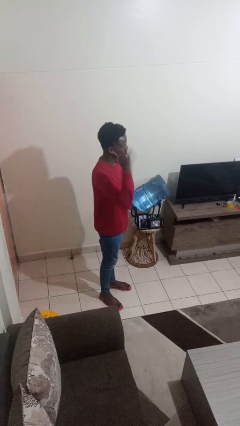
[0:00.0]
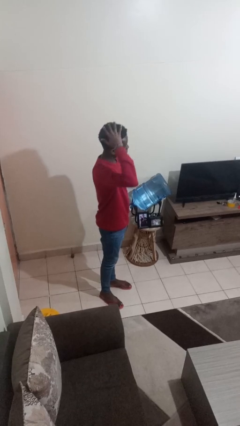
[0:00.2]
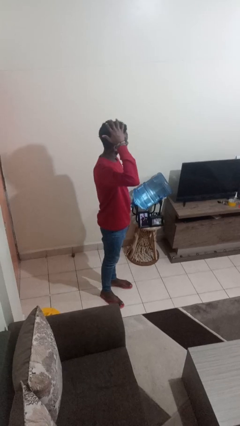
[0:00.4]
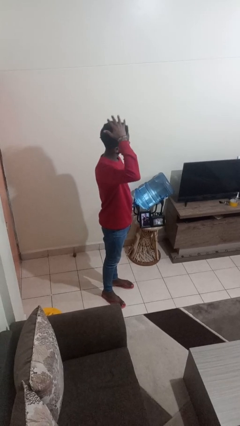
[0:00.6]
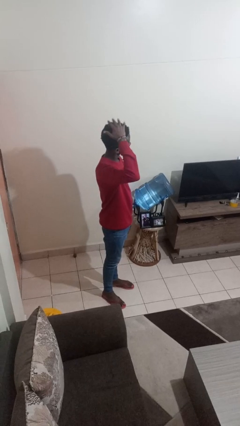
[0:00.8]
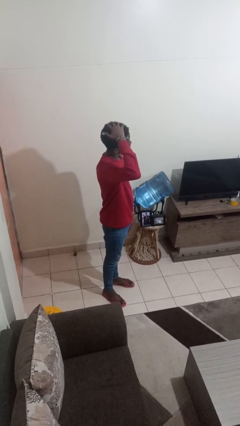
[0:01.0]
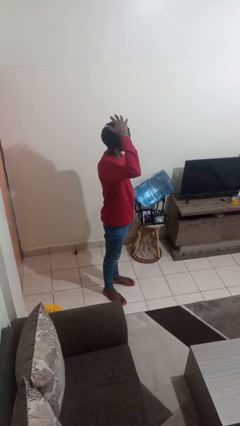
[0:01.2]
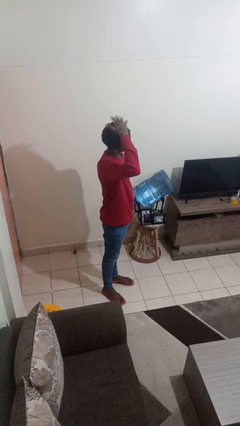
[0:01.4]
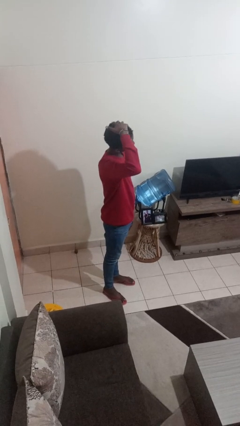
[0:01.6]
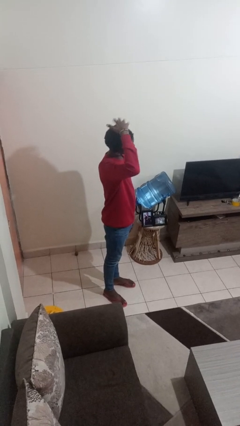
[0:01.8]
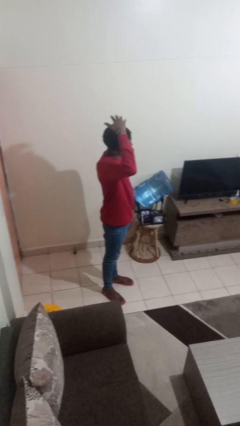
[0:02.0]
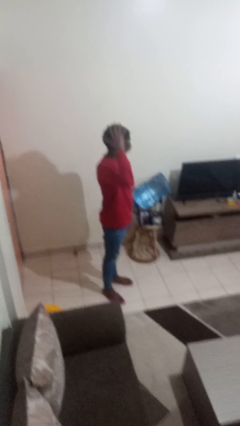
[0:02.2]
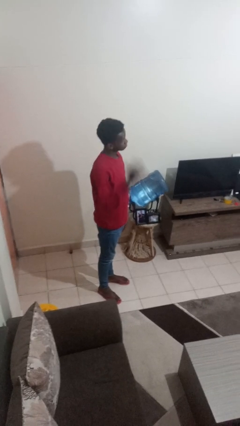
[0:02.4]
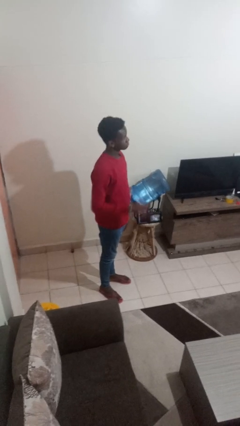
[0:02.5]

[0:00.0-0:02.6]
person pats head

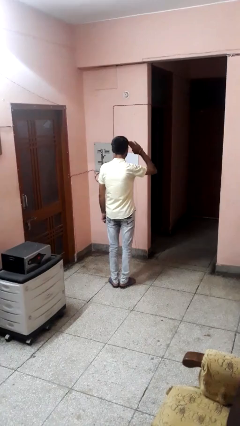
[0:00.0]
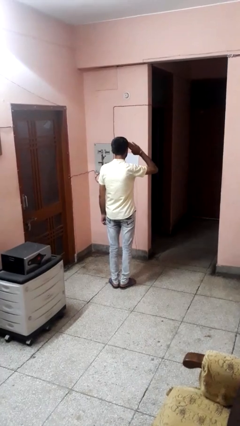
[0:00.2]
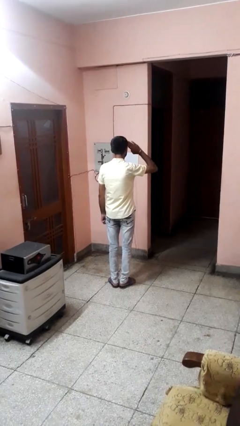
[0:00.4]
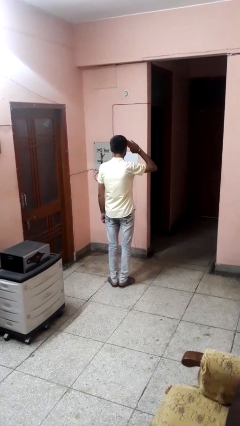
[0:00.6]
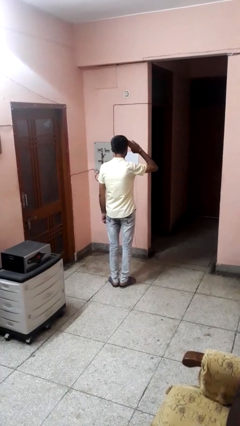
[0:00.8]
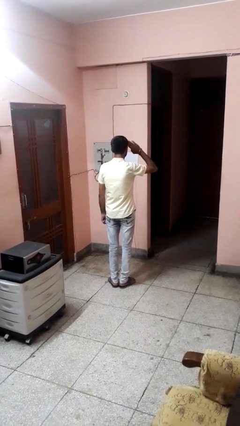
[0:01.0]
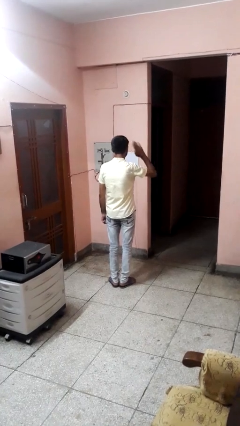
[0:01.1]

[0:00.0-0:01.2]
person salutes

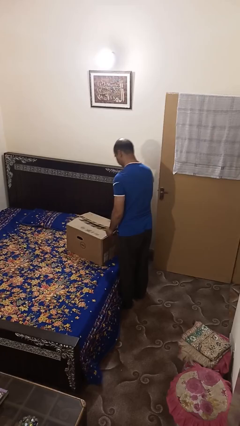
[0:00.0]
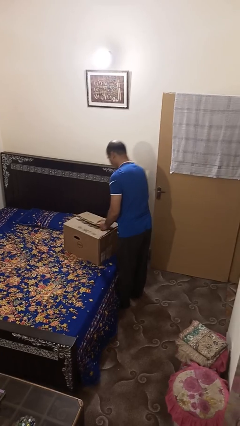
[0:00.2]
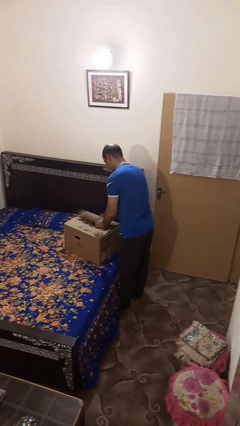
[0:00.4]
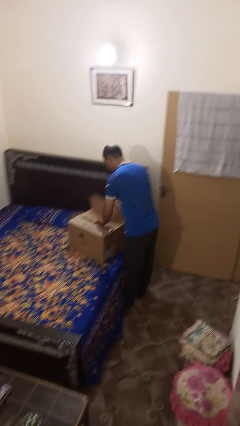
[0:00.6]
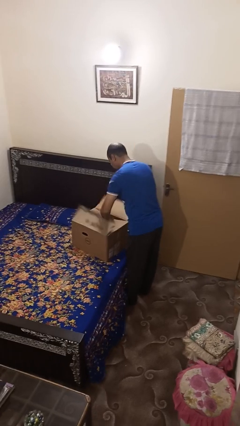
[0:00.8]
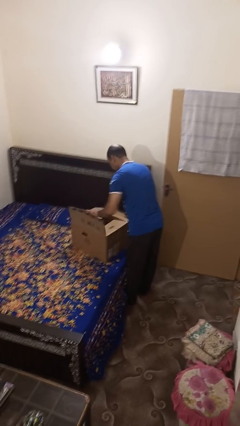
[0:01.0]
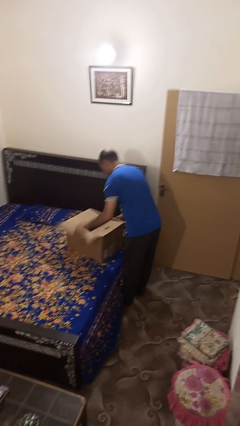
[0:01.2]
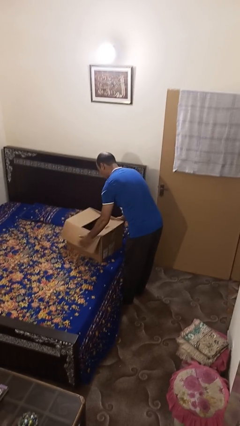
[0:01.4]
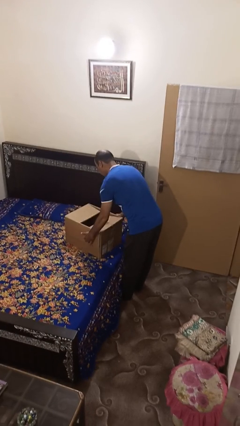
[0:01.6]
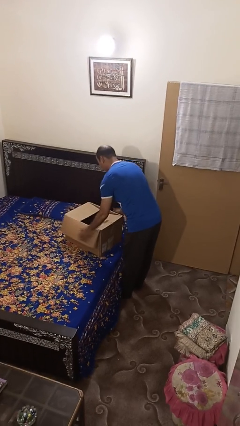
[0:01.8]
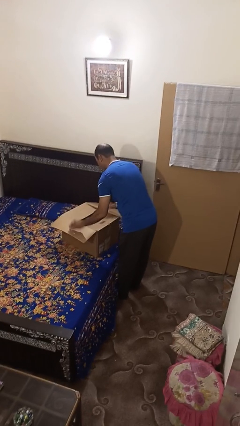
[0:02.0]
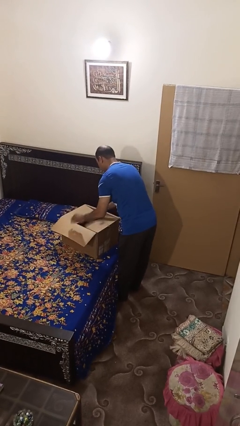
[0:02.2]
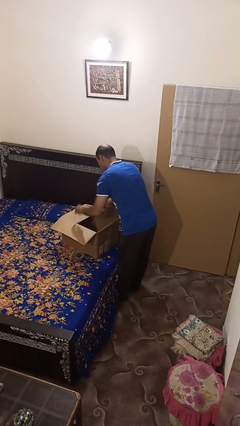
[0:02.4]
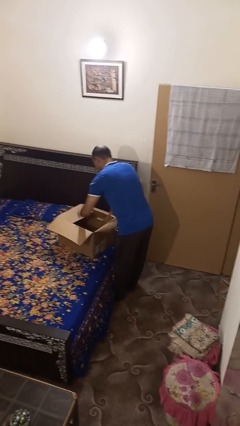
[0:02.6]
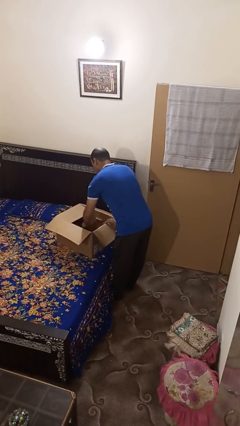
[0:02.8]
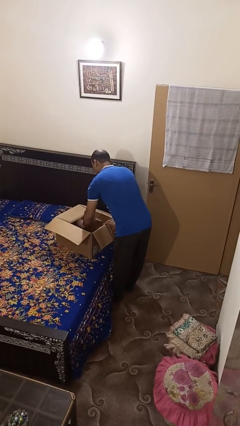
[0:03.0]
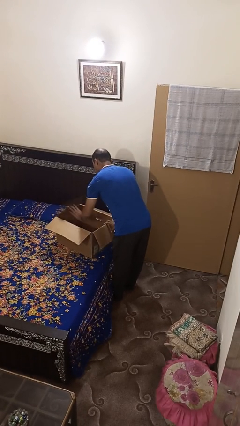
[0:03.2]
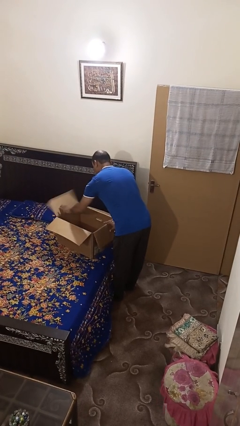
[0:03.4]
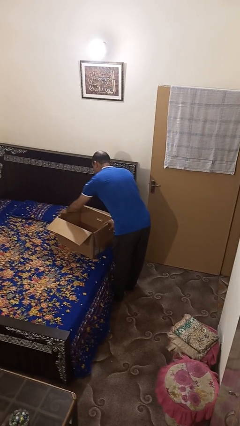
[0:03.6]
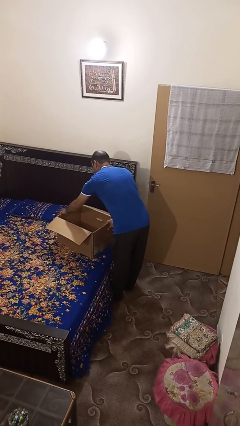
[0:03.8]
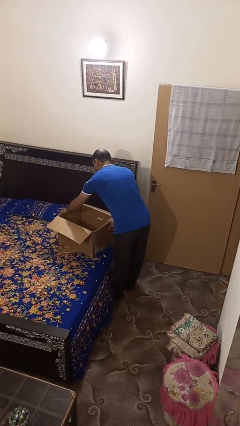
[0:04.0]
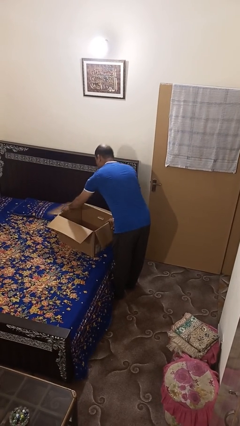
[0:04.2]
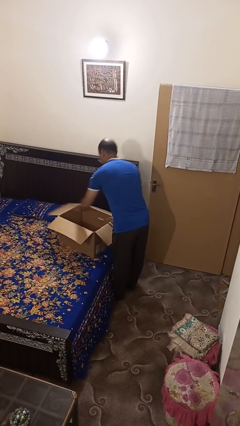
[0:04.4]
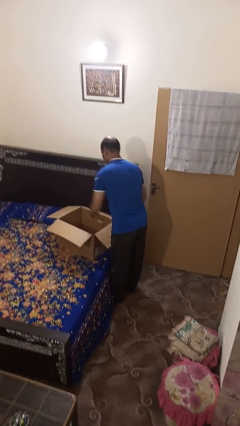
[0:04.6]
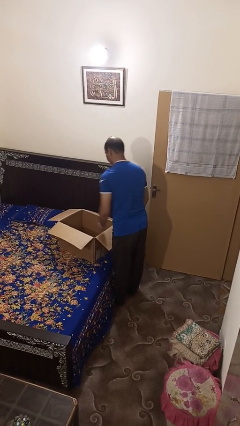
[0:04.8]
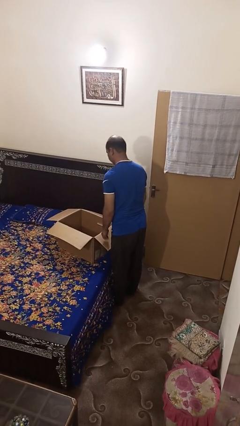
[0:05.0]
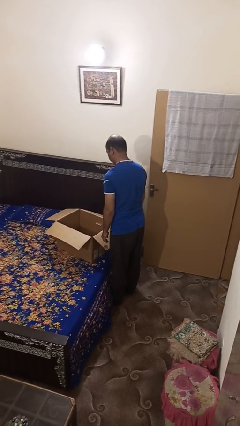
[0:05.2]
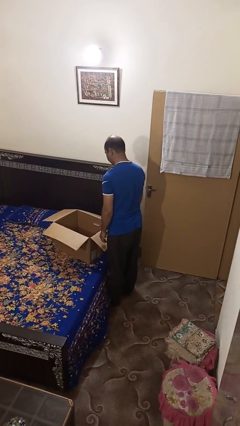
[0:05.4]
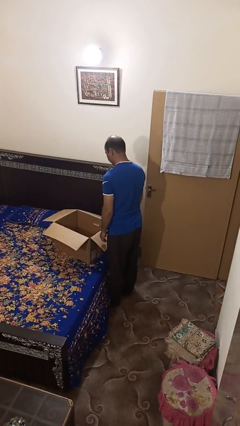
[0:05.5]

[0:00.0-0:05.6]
person opens box

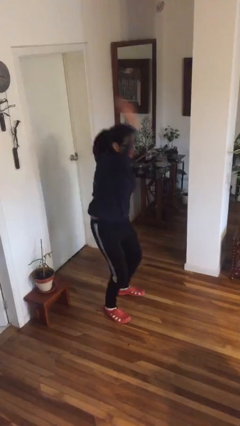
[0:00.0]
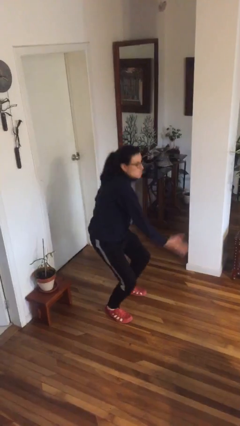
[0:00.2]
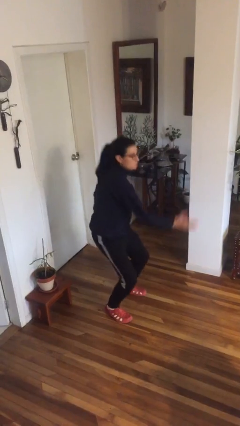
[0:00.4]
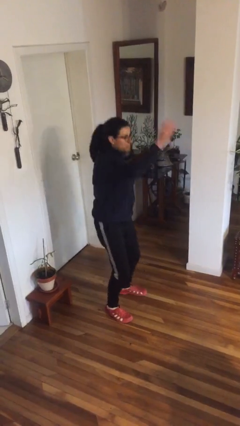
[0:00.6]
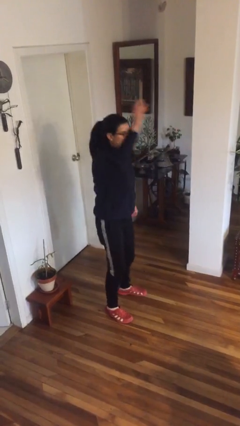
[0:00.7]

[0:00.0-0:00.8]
person karate chop

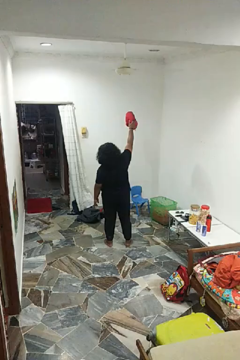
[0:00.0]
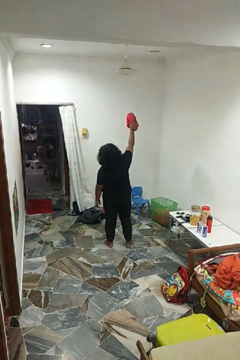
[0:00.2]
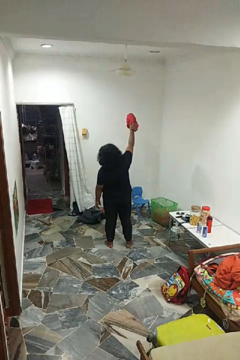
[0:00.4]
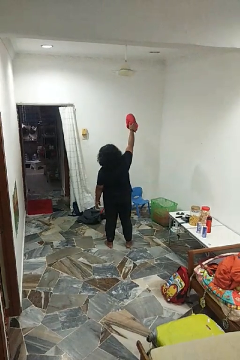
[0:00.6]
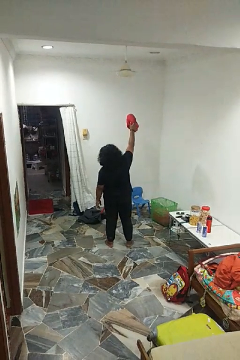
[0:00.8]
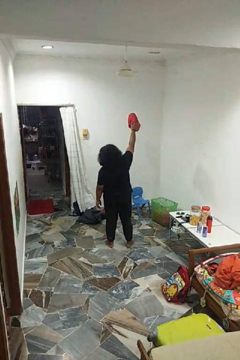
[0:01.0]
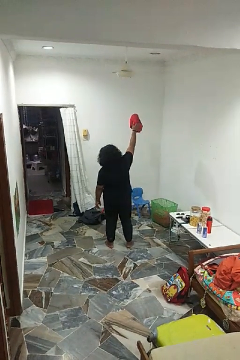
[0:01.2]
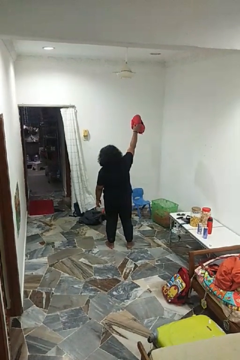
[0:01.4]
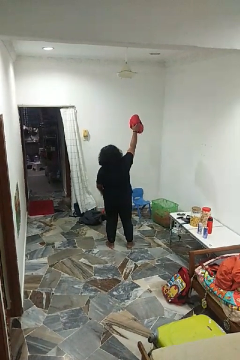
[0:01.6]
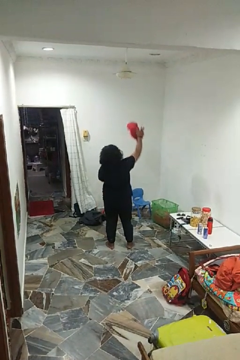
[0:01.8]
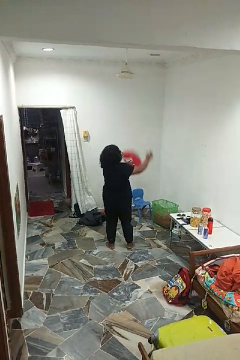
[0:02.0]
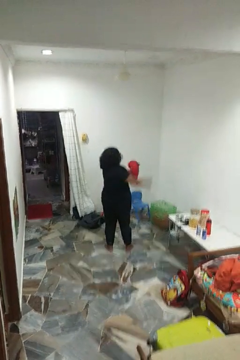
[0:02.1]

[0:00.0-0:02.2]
person drops object

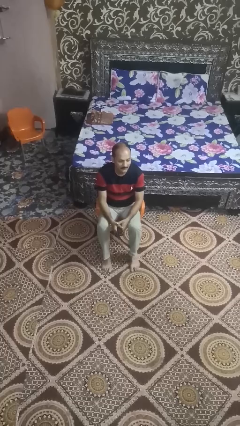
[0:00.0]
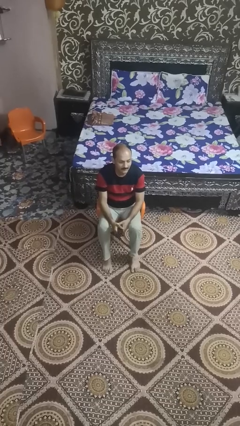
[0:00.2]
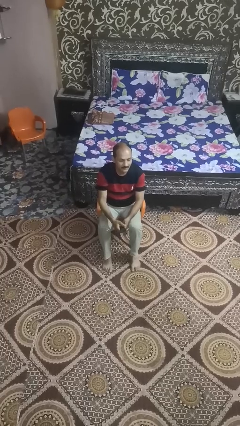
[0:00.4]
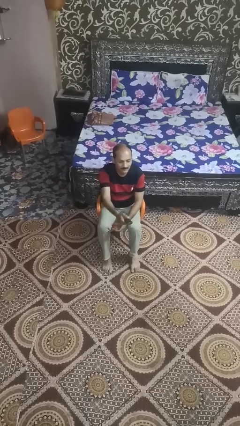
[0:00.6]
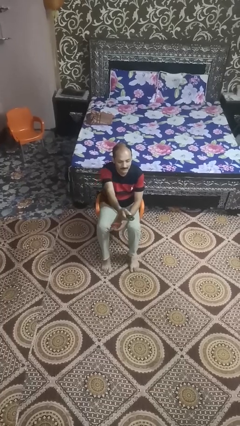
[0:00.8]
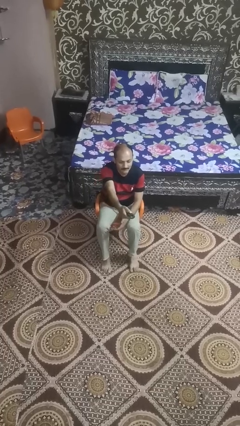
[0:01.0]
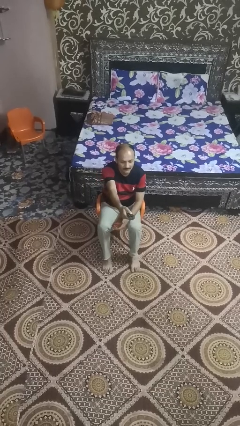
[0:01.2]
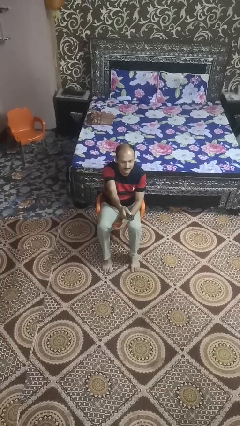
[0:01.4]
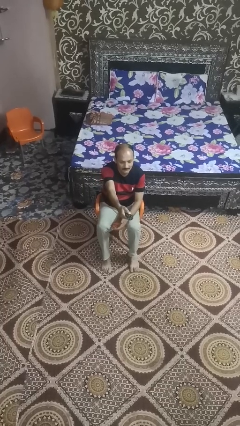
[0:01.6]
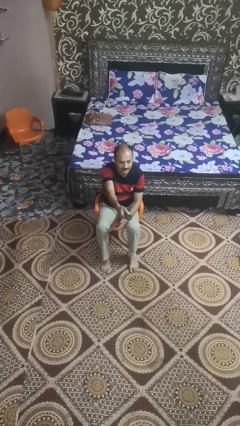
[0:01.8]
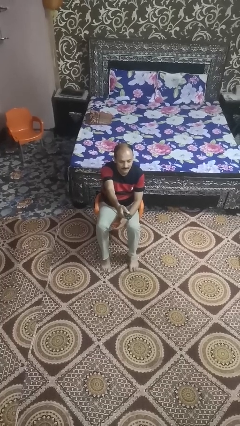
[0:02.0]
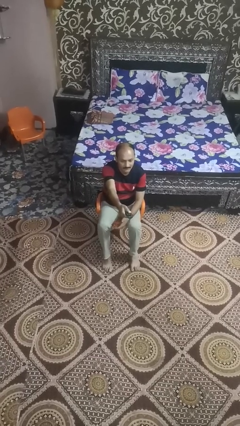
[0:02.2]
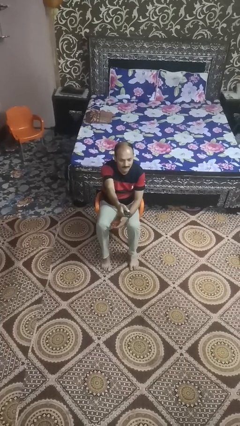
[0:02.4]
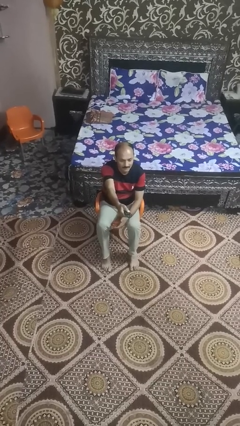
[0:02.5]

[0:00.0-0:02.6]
person uses television remote

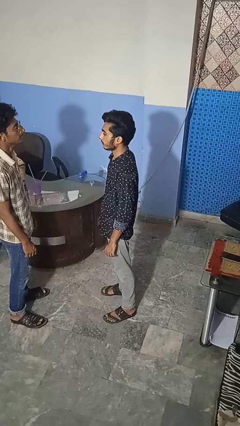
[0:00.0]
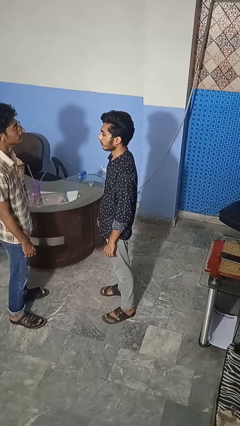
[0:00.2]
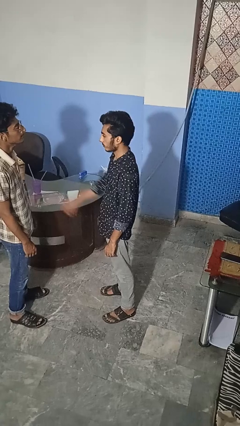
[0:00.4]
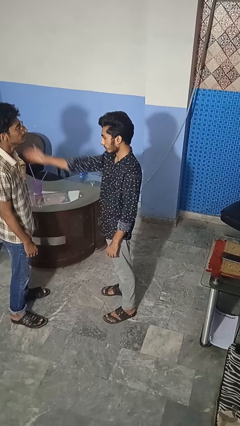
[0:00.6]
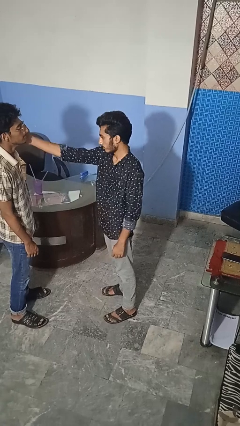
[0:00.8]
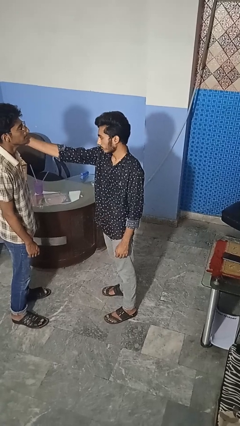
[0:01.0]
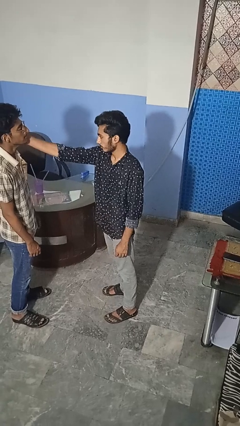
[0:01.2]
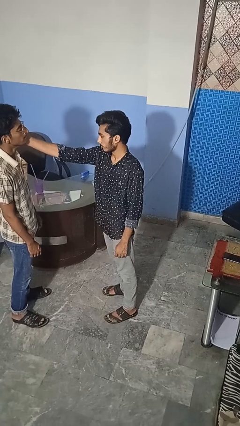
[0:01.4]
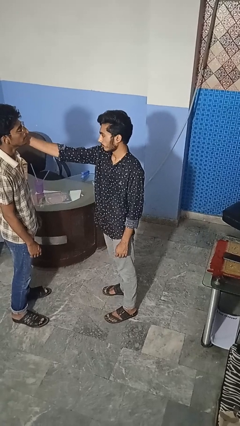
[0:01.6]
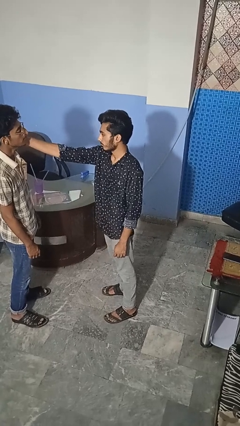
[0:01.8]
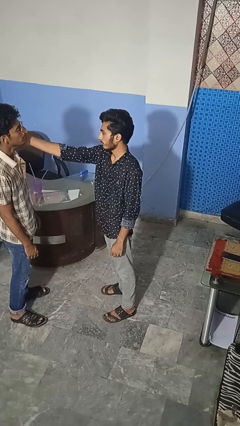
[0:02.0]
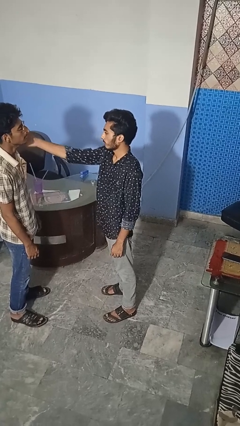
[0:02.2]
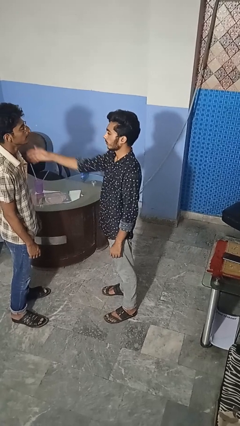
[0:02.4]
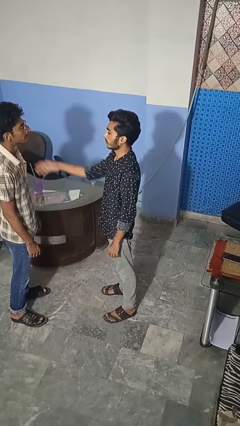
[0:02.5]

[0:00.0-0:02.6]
person touches face of person
